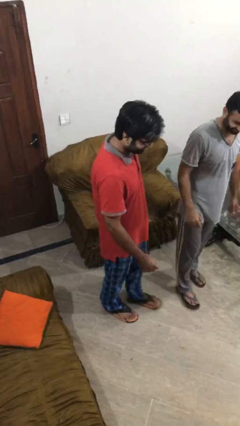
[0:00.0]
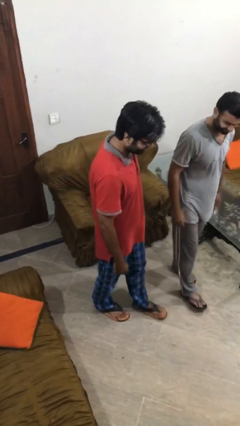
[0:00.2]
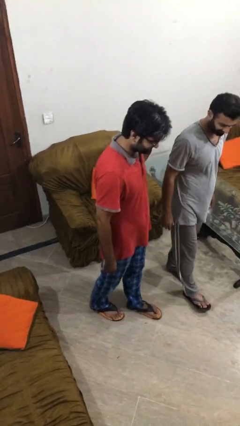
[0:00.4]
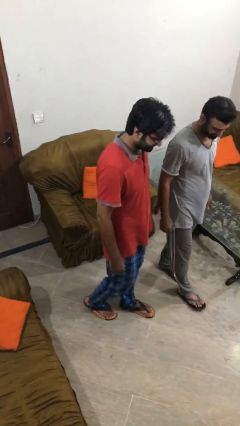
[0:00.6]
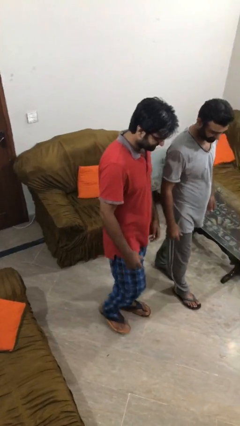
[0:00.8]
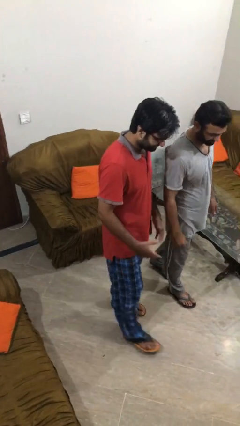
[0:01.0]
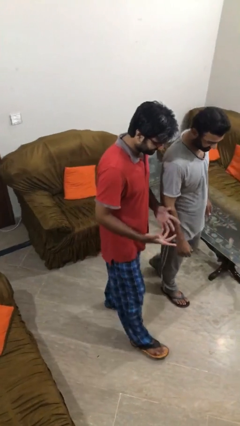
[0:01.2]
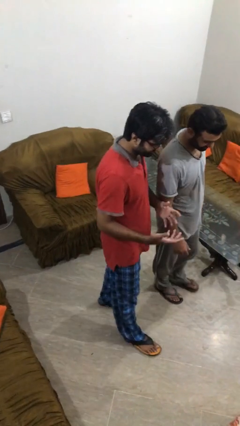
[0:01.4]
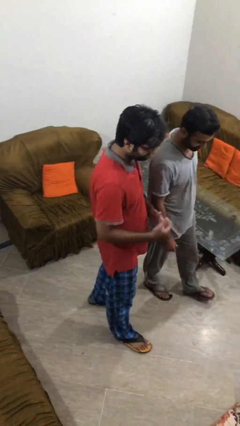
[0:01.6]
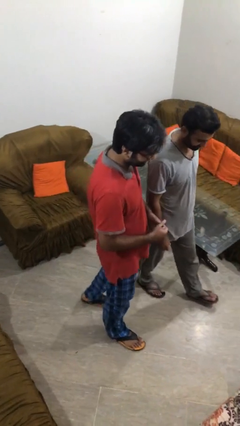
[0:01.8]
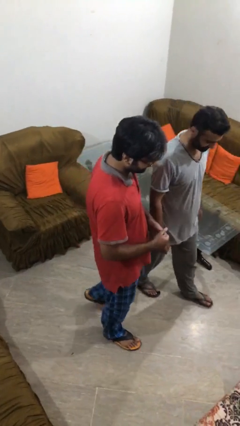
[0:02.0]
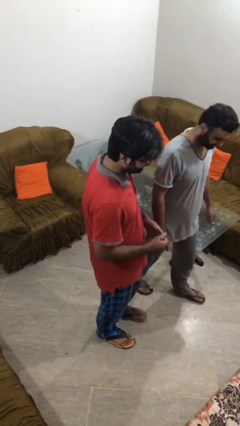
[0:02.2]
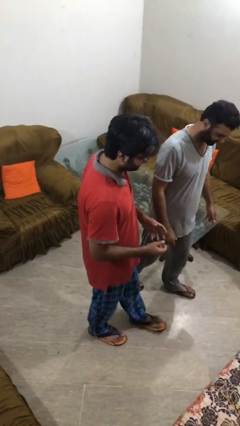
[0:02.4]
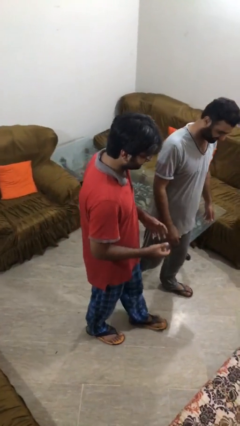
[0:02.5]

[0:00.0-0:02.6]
person talks to person

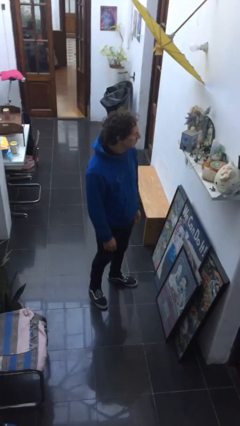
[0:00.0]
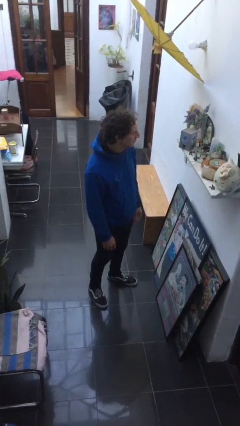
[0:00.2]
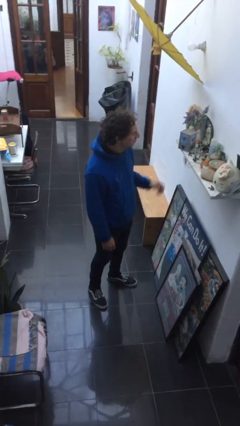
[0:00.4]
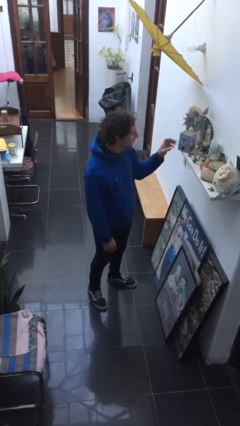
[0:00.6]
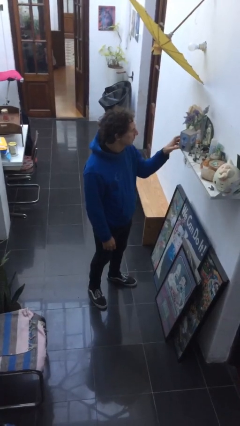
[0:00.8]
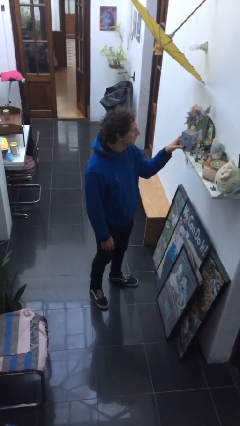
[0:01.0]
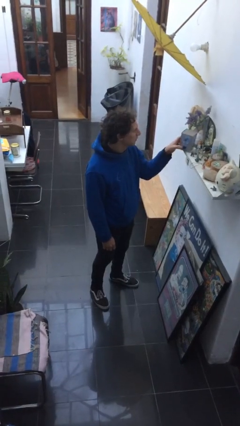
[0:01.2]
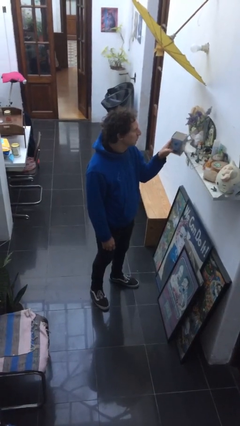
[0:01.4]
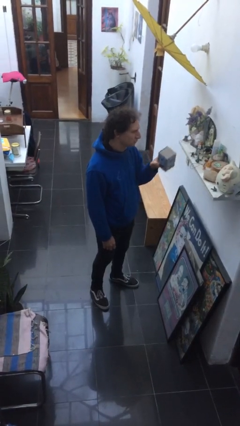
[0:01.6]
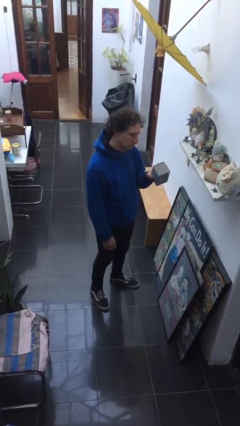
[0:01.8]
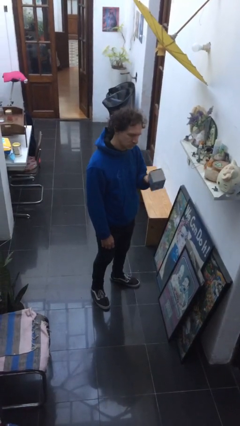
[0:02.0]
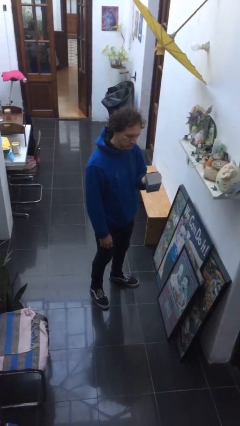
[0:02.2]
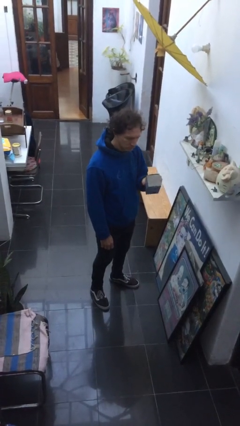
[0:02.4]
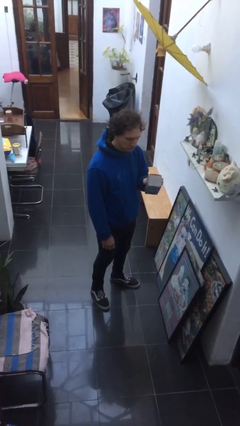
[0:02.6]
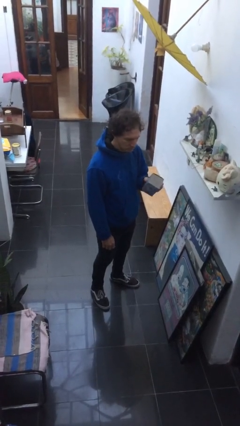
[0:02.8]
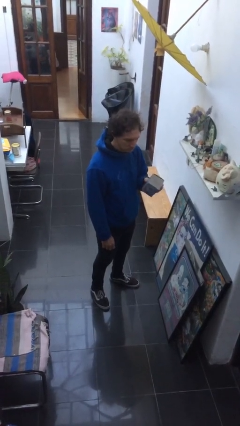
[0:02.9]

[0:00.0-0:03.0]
person picks up object from countertop

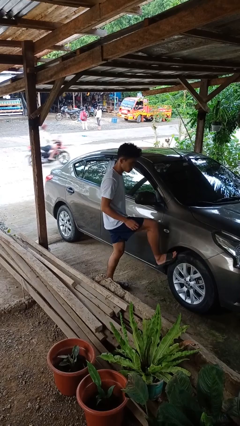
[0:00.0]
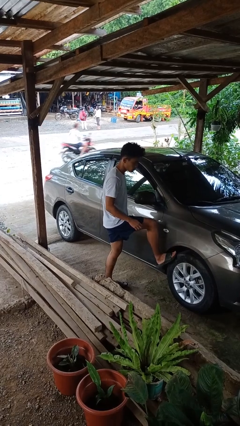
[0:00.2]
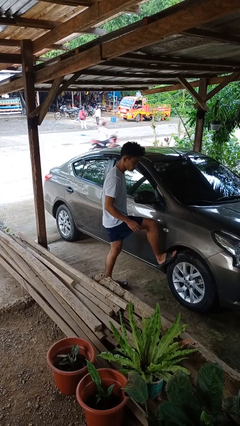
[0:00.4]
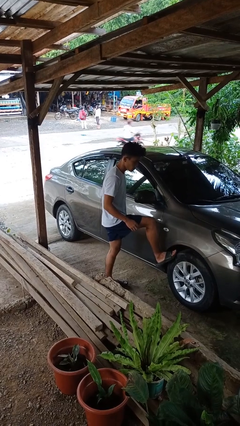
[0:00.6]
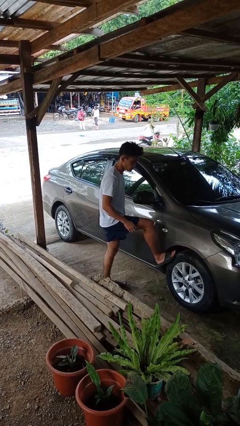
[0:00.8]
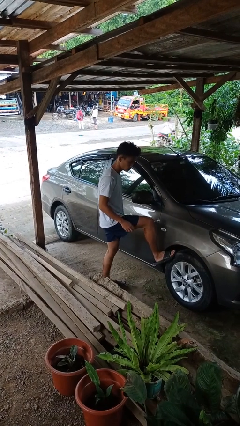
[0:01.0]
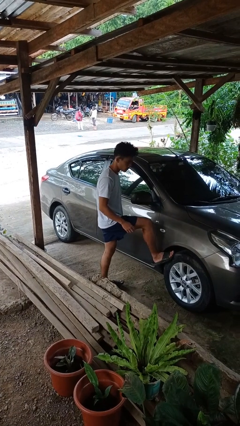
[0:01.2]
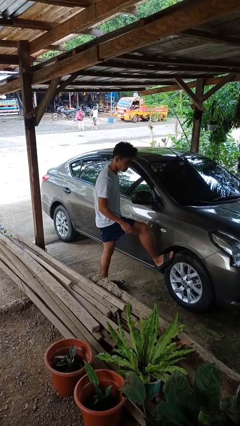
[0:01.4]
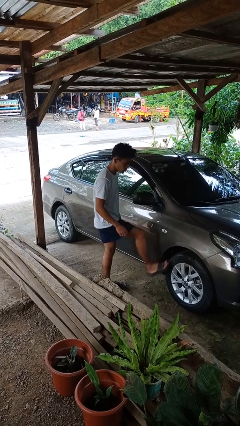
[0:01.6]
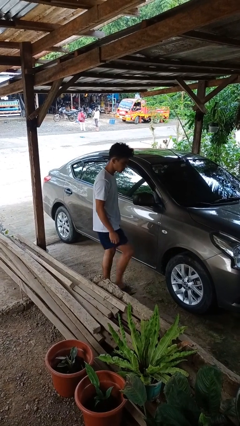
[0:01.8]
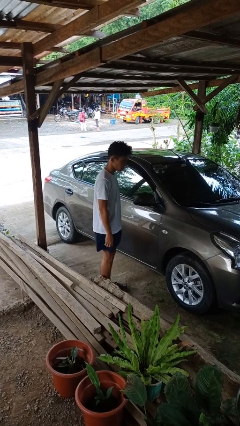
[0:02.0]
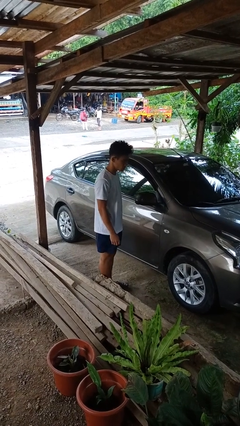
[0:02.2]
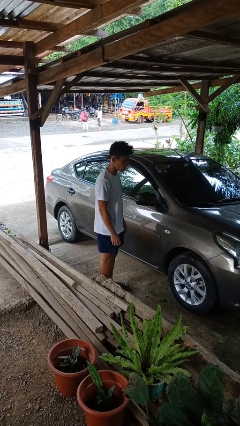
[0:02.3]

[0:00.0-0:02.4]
person kicks car tires

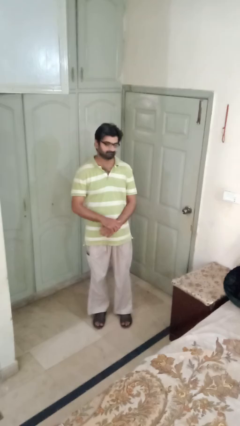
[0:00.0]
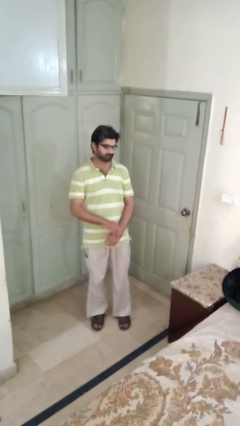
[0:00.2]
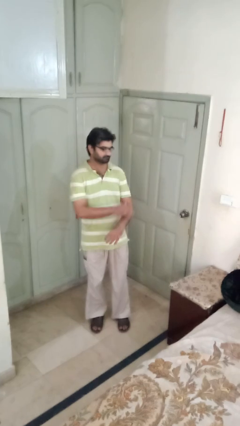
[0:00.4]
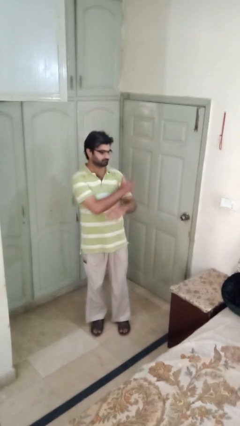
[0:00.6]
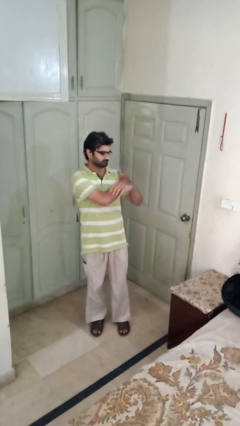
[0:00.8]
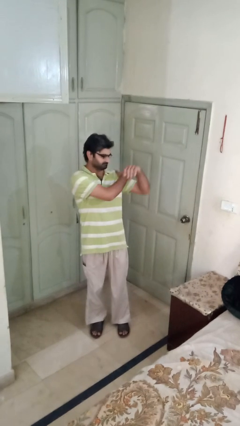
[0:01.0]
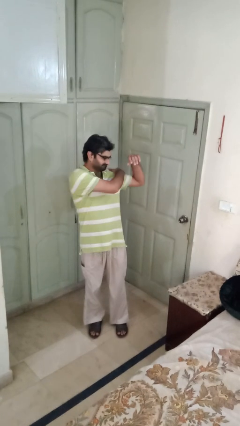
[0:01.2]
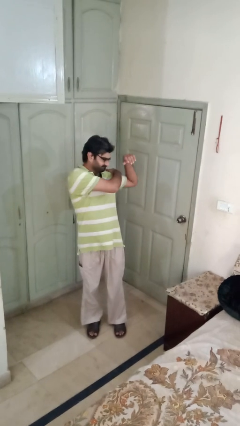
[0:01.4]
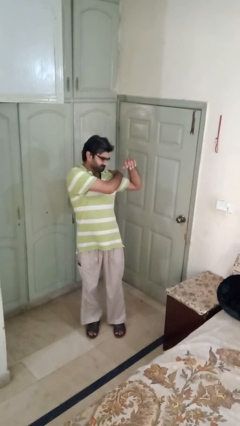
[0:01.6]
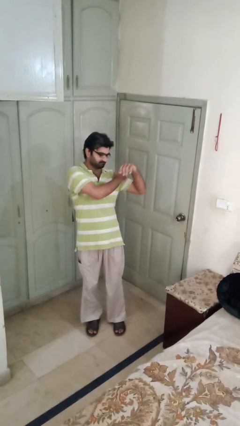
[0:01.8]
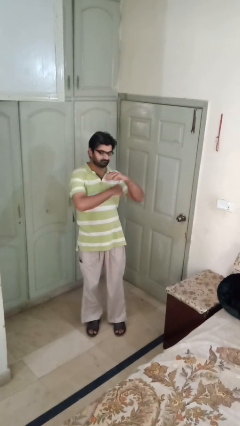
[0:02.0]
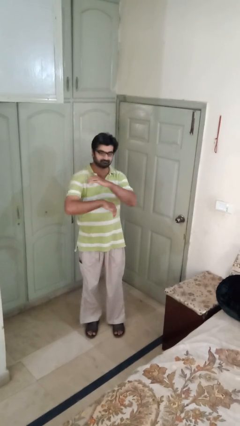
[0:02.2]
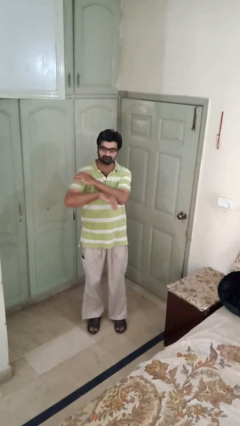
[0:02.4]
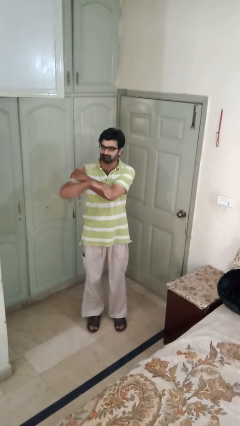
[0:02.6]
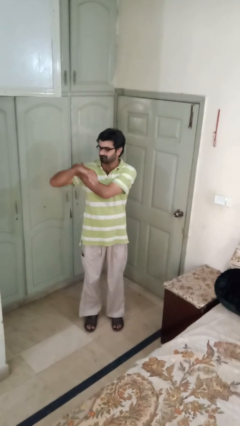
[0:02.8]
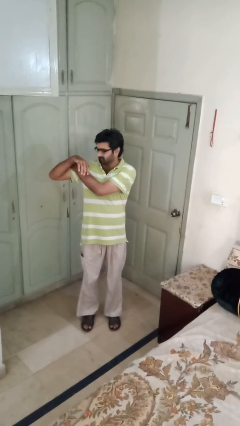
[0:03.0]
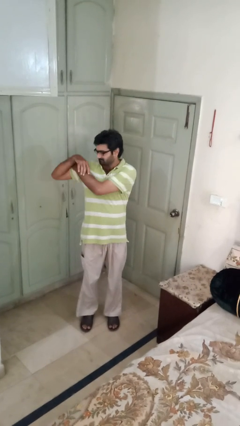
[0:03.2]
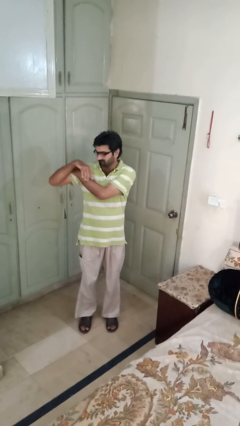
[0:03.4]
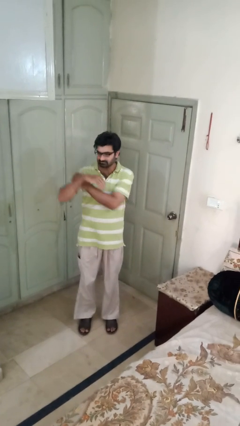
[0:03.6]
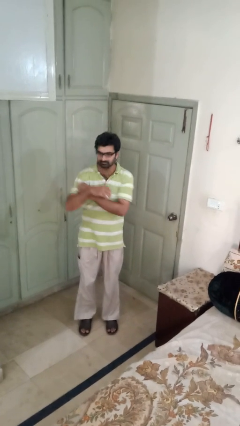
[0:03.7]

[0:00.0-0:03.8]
person stretches arms to side

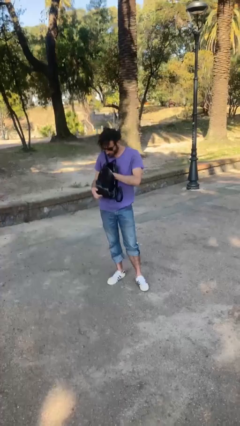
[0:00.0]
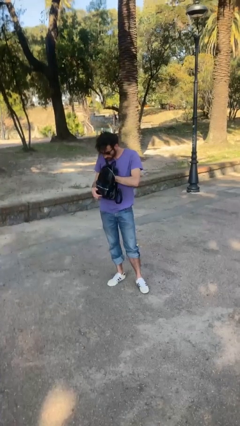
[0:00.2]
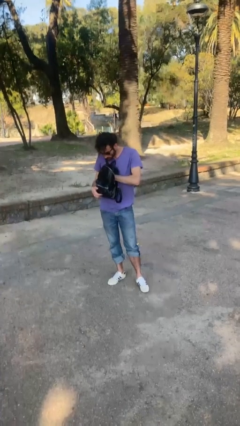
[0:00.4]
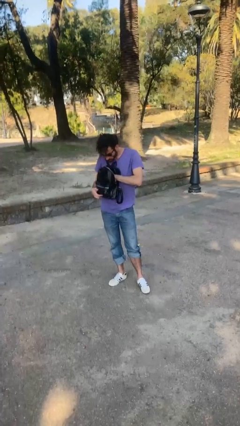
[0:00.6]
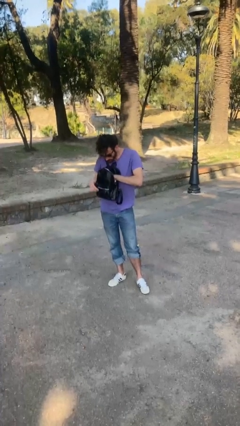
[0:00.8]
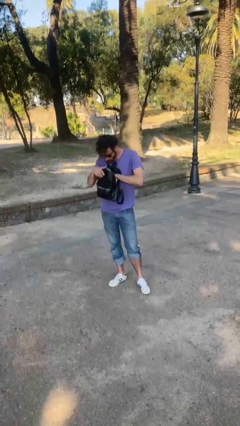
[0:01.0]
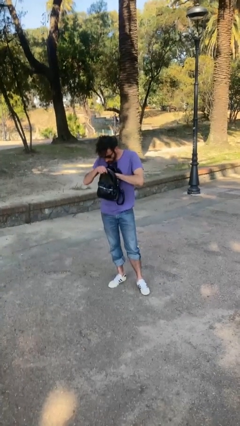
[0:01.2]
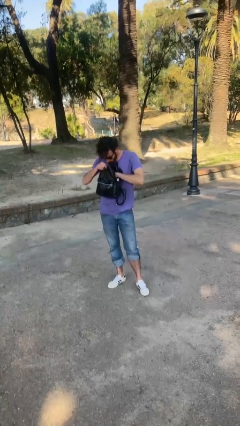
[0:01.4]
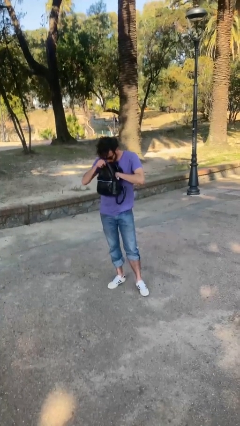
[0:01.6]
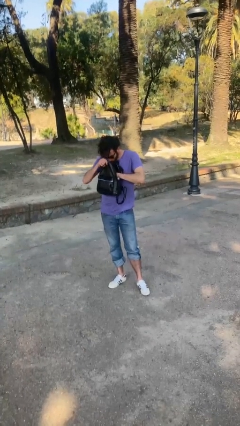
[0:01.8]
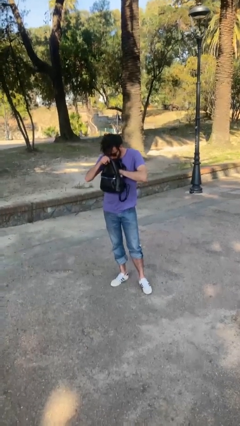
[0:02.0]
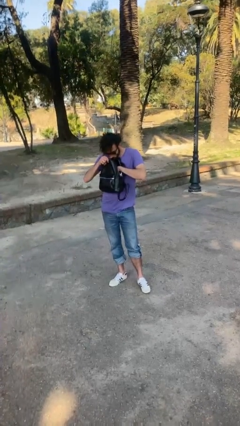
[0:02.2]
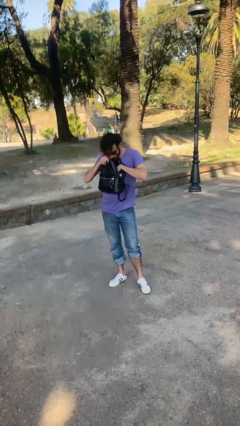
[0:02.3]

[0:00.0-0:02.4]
person searches in purse

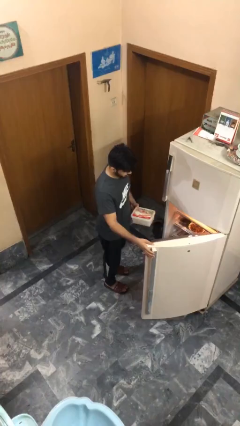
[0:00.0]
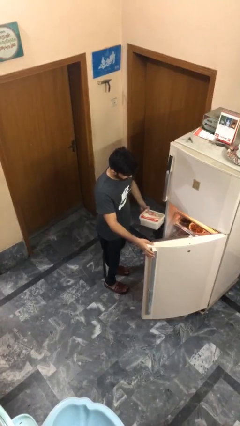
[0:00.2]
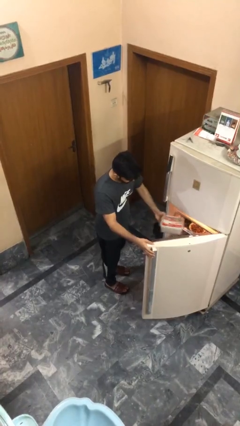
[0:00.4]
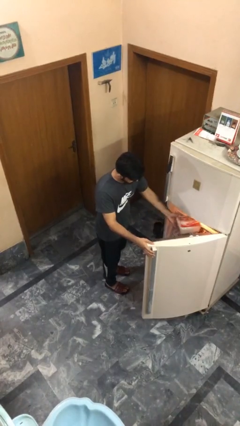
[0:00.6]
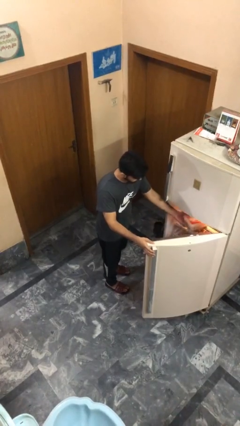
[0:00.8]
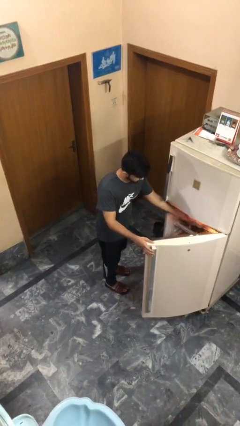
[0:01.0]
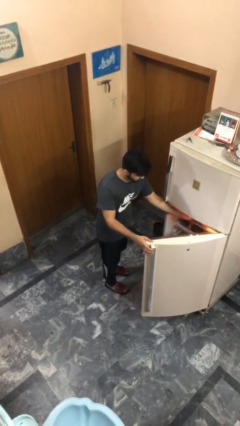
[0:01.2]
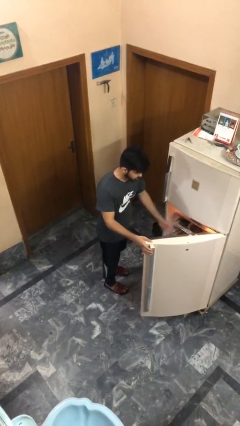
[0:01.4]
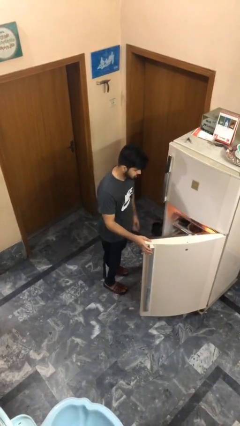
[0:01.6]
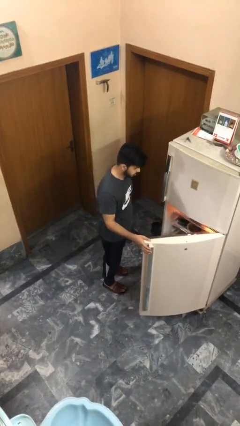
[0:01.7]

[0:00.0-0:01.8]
person puts object into refrigerator

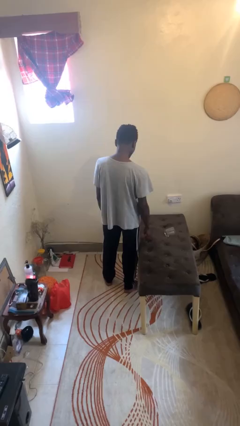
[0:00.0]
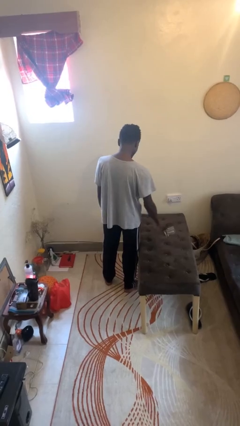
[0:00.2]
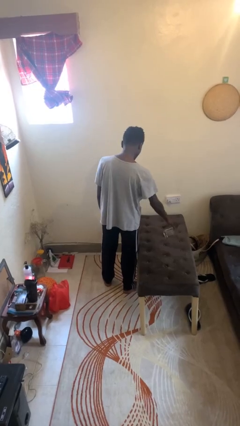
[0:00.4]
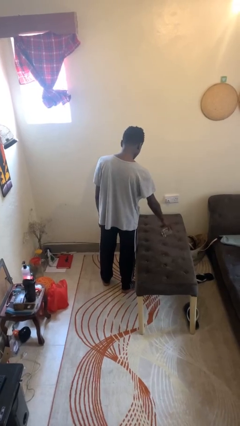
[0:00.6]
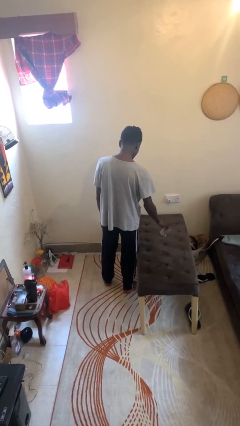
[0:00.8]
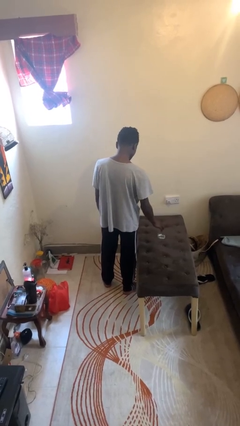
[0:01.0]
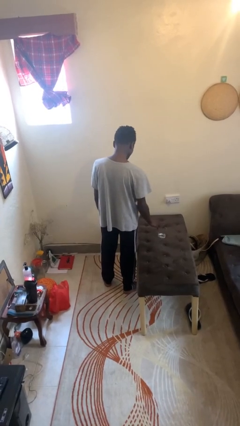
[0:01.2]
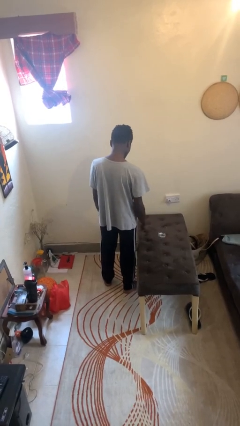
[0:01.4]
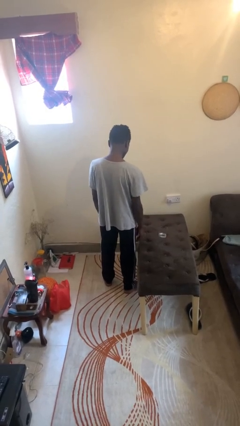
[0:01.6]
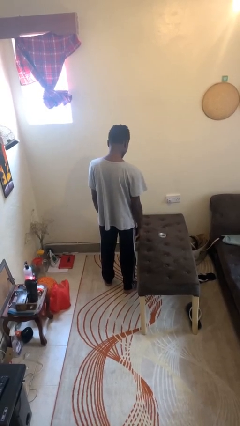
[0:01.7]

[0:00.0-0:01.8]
person sets upright glass
